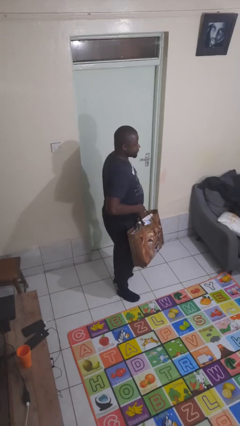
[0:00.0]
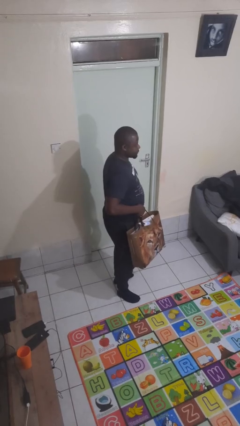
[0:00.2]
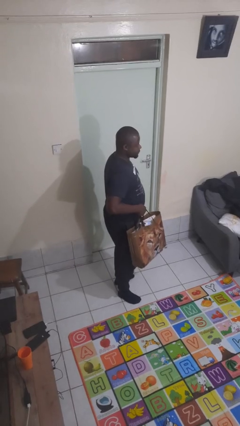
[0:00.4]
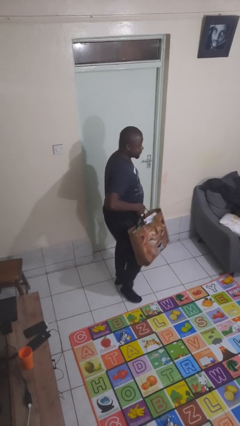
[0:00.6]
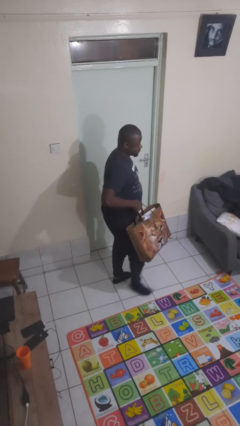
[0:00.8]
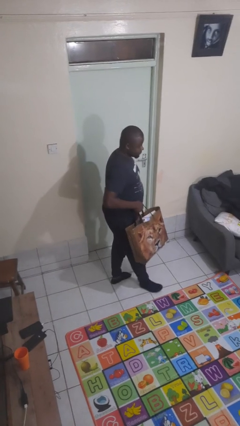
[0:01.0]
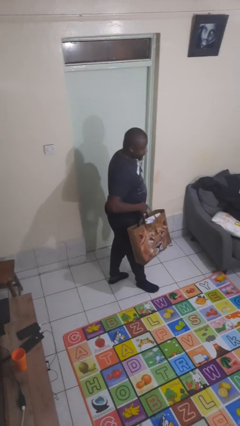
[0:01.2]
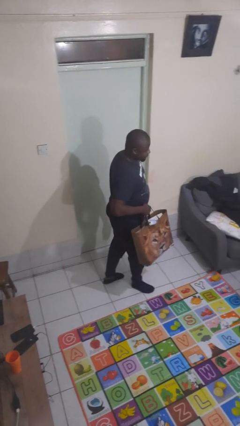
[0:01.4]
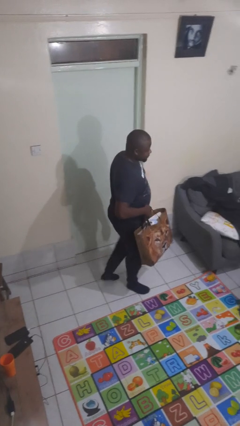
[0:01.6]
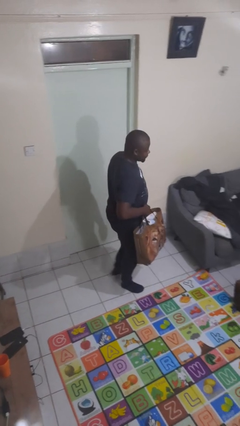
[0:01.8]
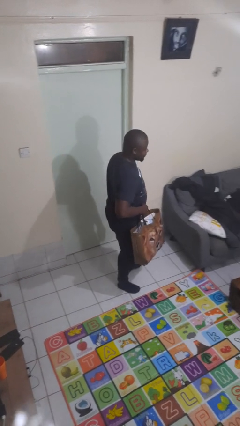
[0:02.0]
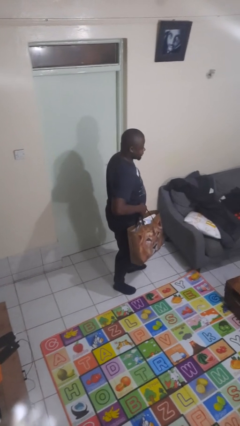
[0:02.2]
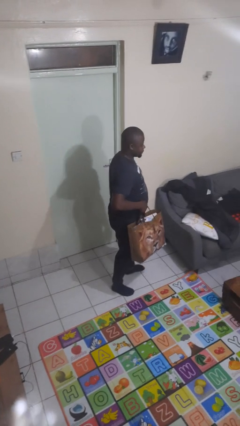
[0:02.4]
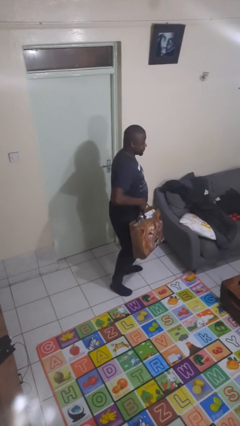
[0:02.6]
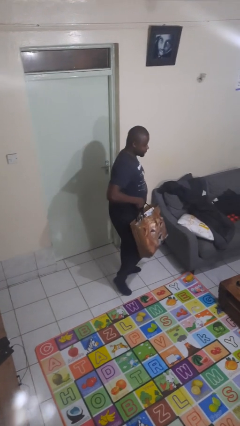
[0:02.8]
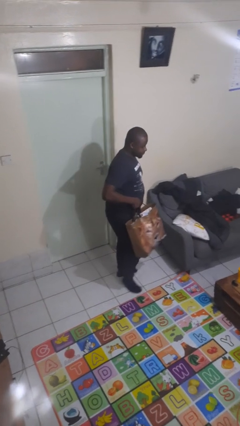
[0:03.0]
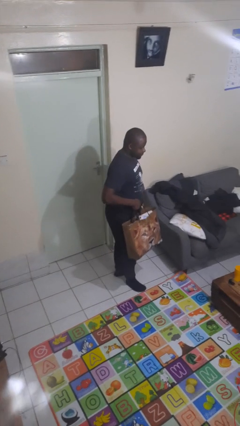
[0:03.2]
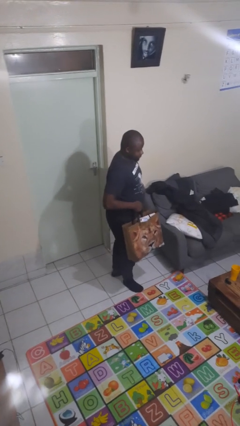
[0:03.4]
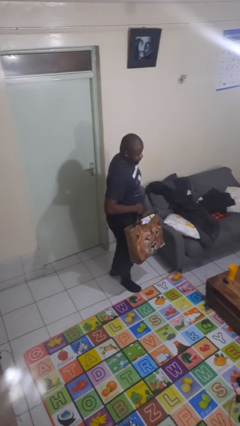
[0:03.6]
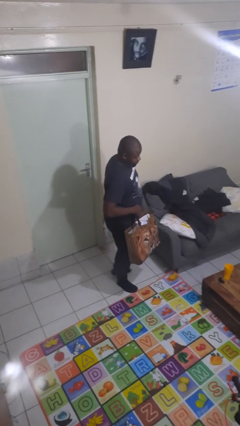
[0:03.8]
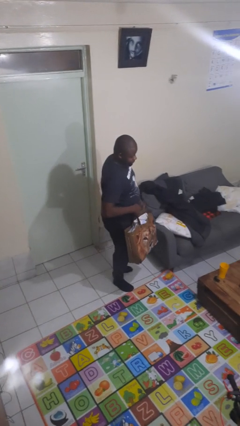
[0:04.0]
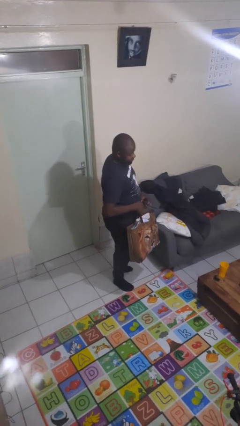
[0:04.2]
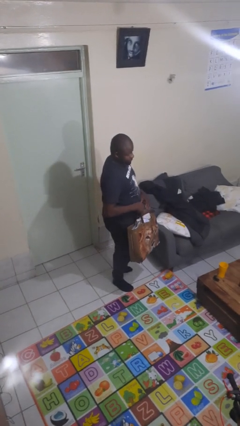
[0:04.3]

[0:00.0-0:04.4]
person carries groceries

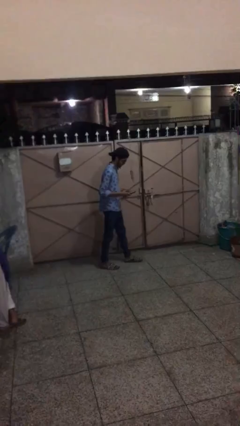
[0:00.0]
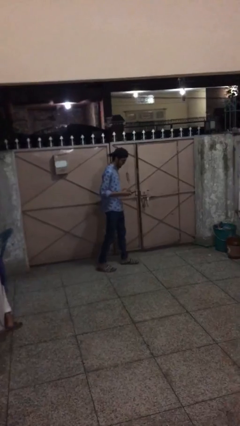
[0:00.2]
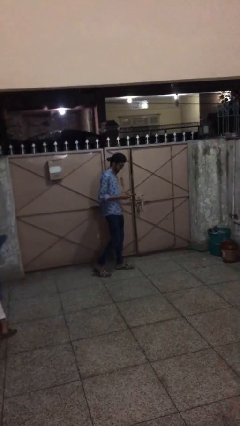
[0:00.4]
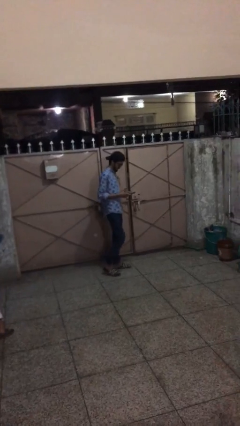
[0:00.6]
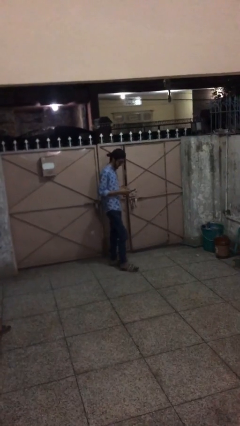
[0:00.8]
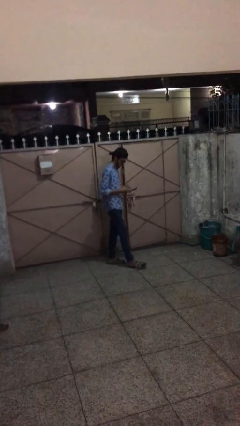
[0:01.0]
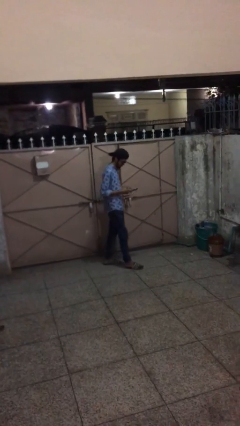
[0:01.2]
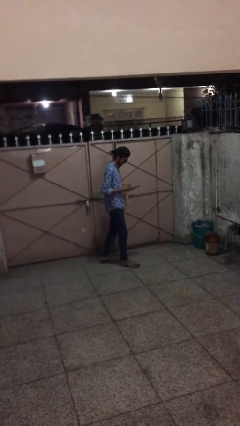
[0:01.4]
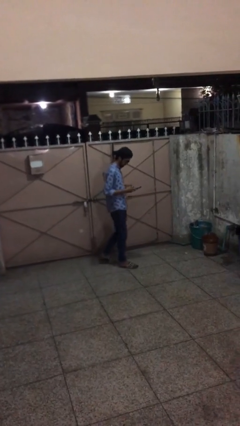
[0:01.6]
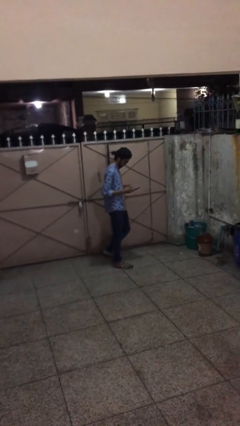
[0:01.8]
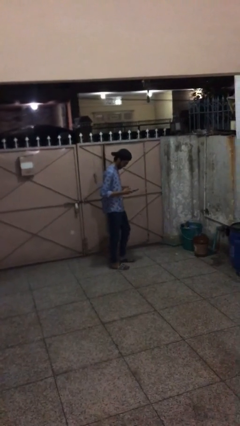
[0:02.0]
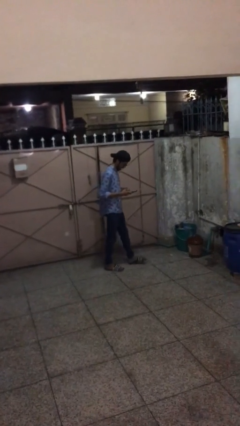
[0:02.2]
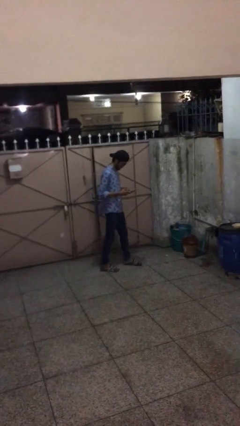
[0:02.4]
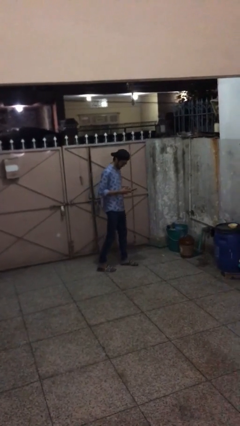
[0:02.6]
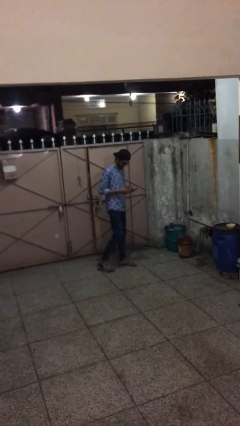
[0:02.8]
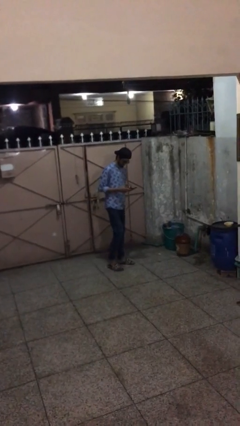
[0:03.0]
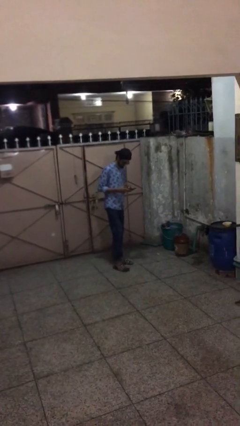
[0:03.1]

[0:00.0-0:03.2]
person texts on phone

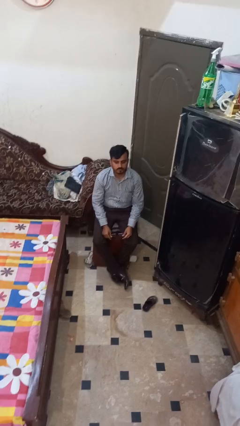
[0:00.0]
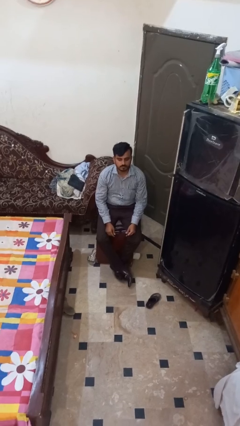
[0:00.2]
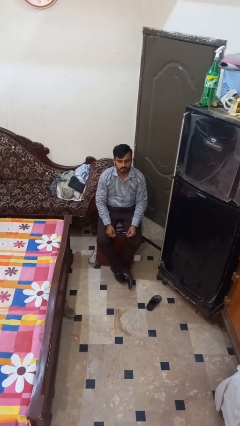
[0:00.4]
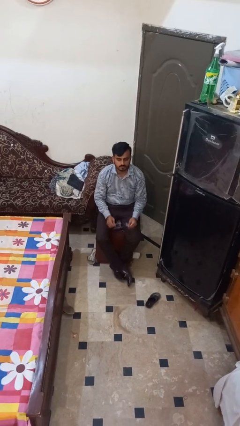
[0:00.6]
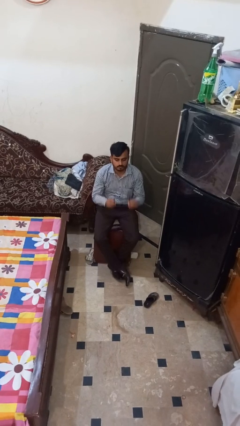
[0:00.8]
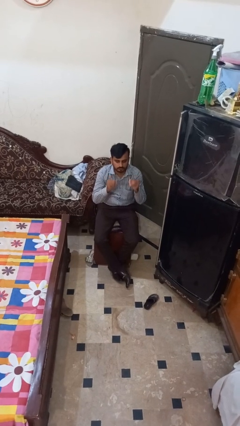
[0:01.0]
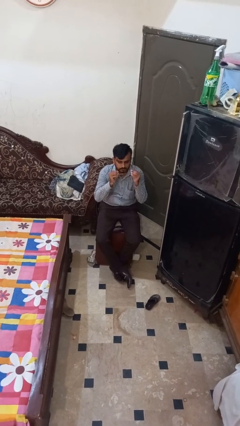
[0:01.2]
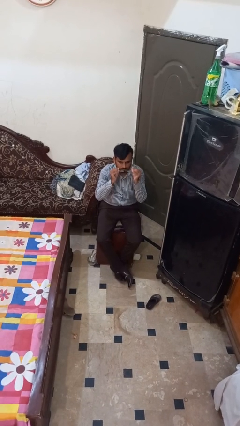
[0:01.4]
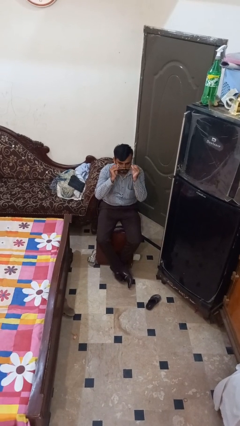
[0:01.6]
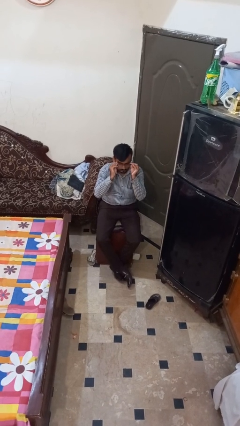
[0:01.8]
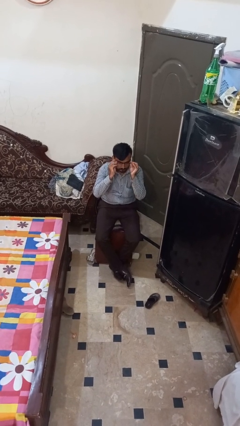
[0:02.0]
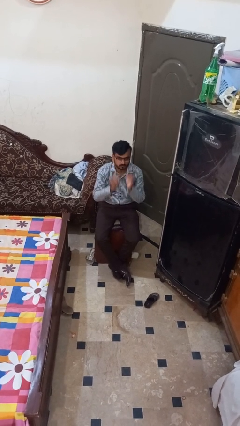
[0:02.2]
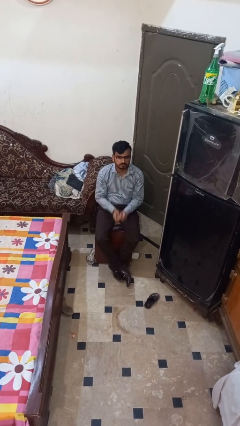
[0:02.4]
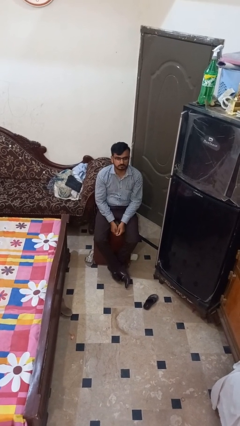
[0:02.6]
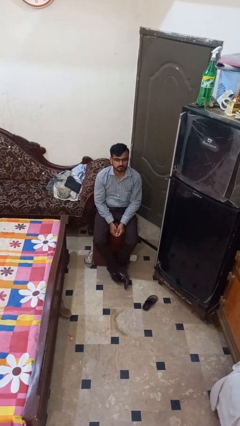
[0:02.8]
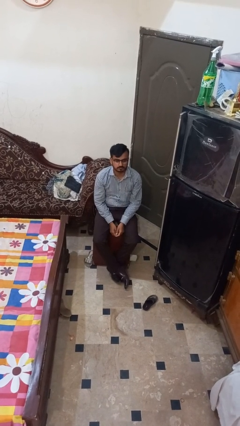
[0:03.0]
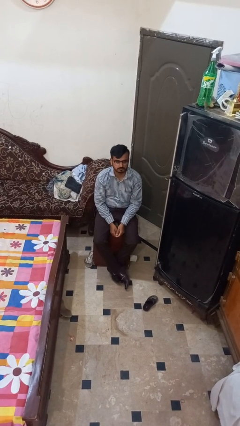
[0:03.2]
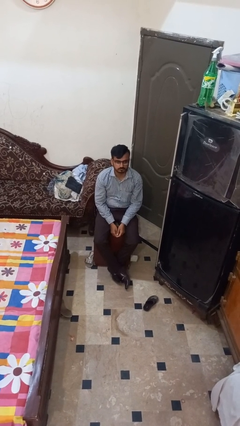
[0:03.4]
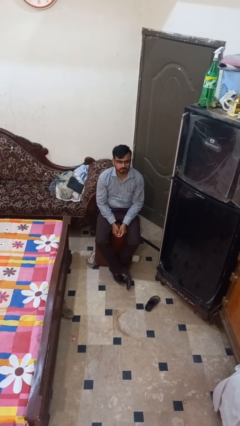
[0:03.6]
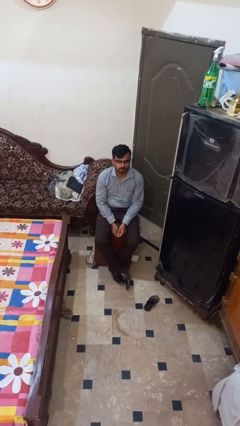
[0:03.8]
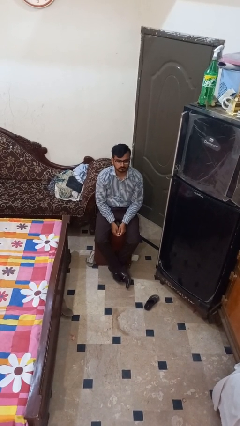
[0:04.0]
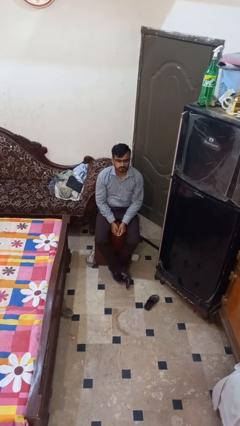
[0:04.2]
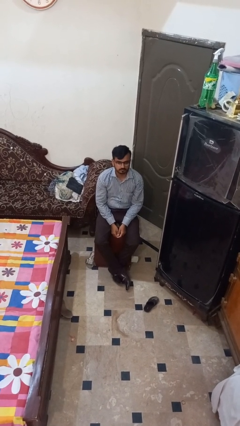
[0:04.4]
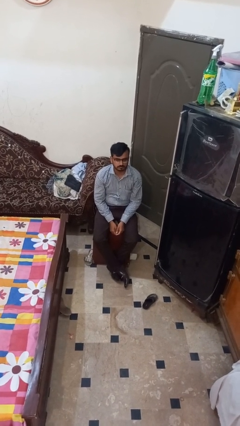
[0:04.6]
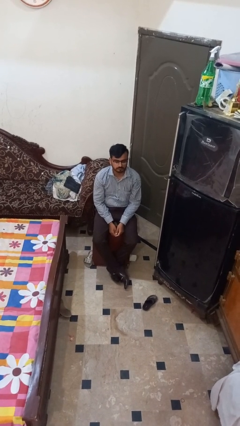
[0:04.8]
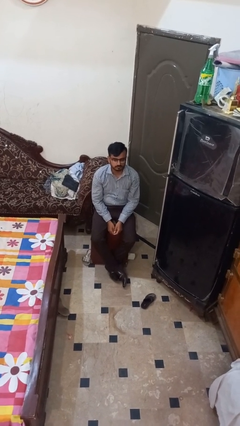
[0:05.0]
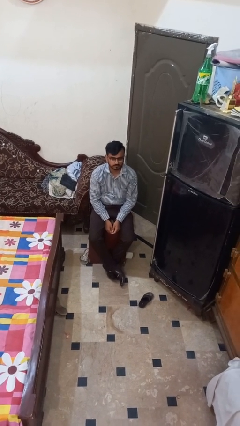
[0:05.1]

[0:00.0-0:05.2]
person puts on glasses

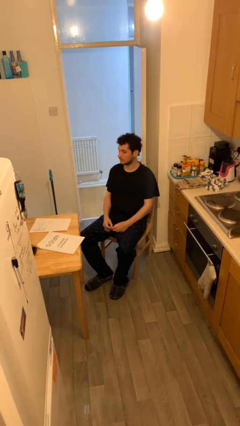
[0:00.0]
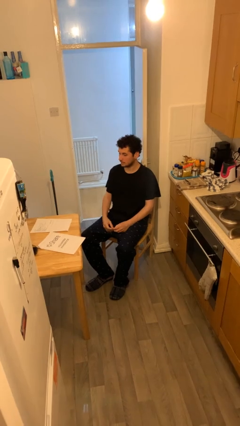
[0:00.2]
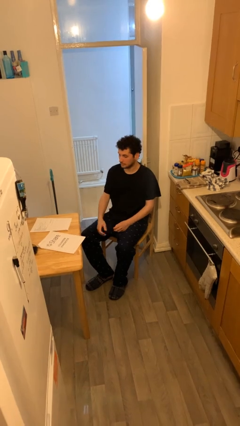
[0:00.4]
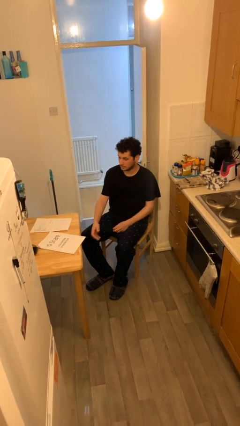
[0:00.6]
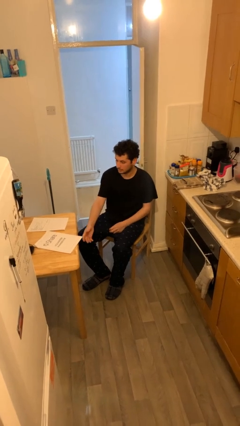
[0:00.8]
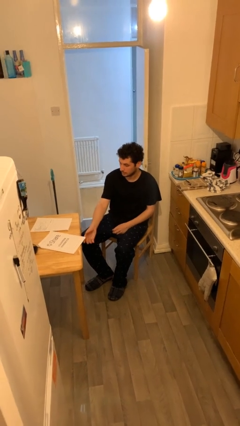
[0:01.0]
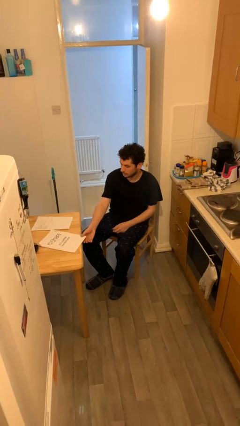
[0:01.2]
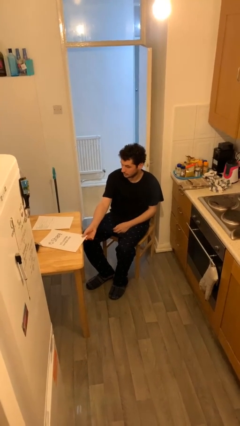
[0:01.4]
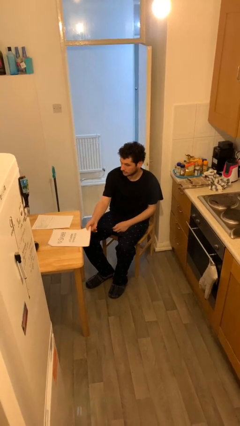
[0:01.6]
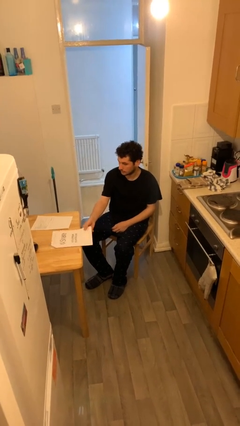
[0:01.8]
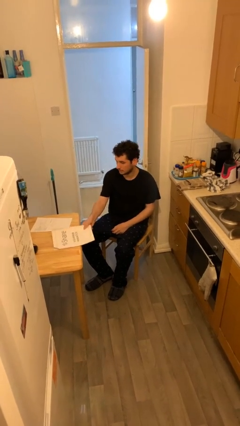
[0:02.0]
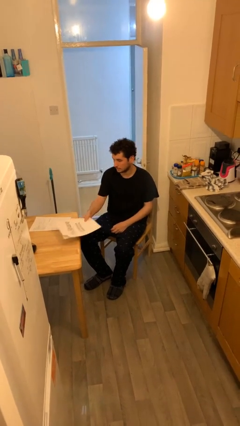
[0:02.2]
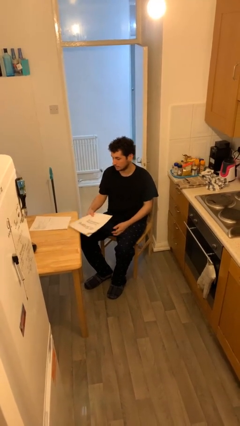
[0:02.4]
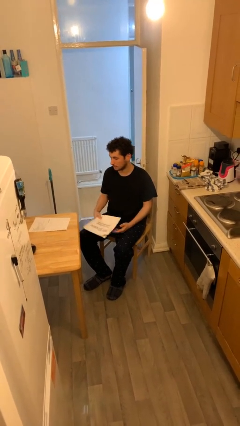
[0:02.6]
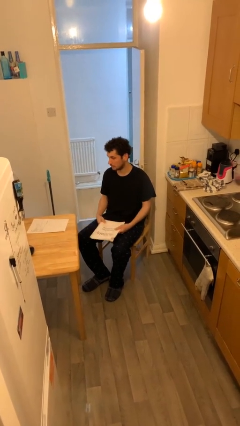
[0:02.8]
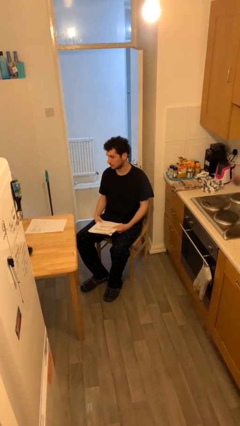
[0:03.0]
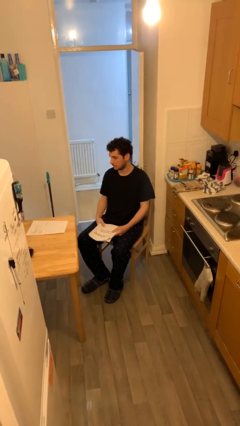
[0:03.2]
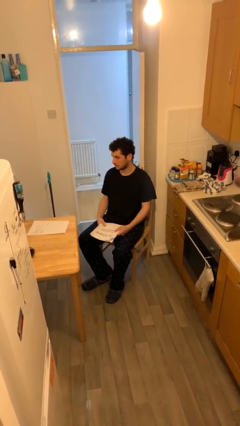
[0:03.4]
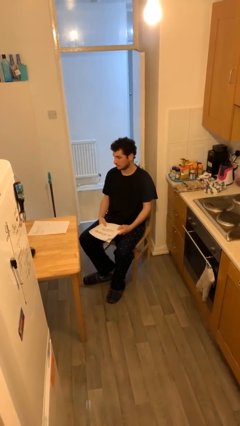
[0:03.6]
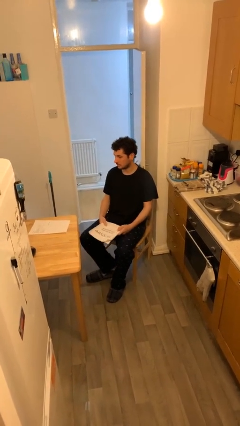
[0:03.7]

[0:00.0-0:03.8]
person picks up object from table

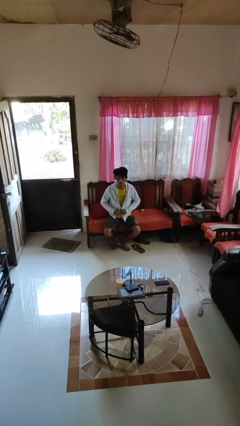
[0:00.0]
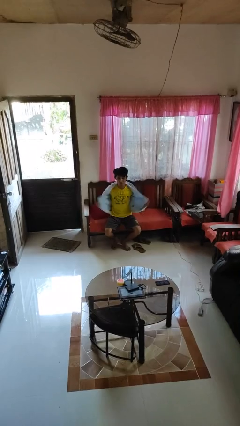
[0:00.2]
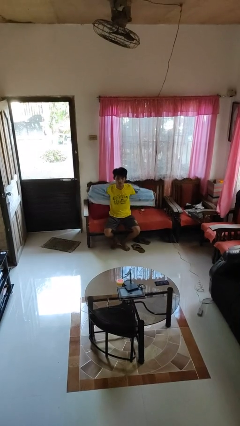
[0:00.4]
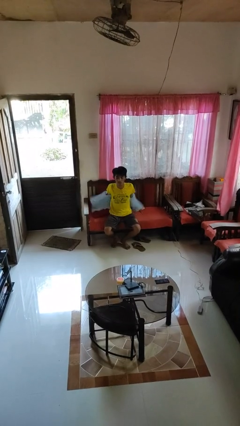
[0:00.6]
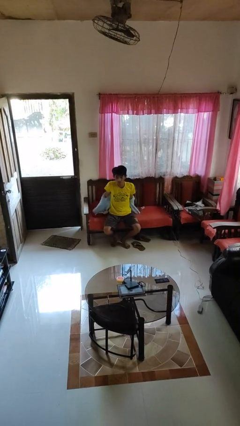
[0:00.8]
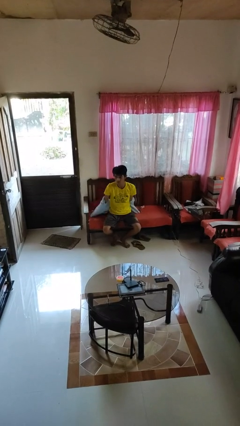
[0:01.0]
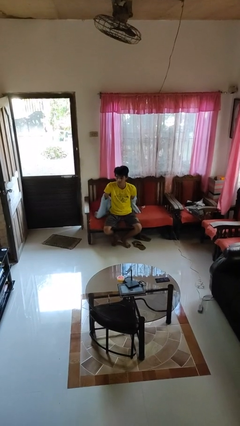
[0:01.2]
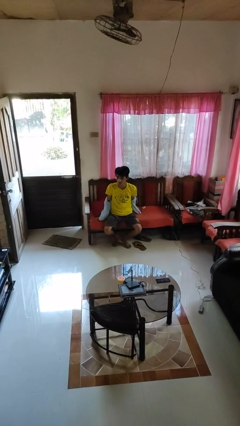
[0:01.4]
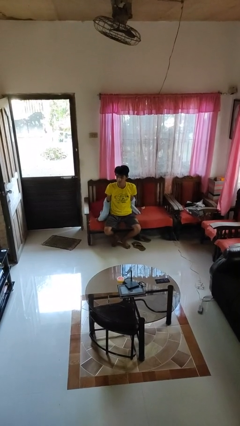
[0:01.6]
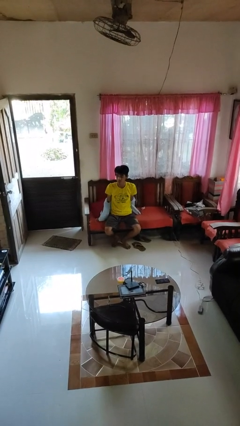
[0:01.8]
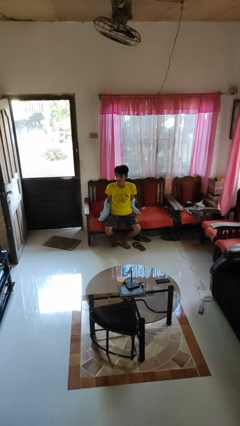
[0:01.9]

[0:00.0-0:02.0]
person takes off jacket
